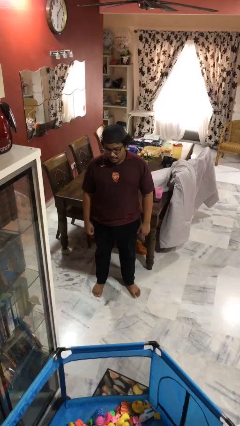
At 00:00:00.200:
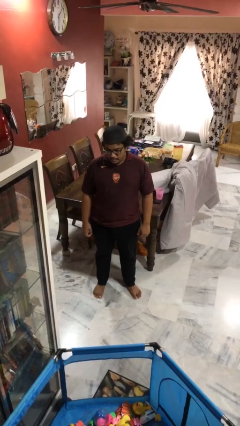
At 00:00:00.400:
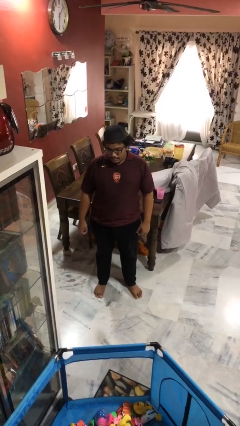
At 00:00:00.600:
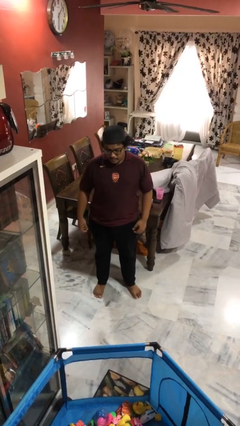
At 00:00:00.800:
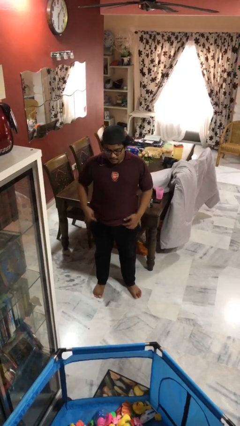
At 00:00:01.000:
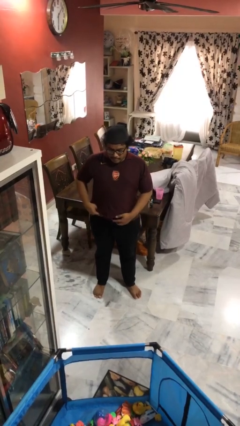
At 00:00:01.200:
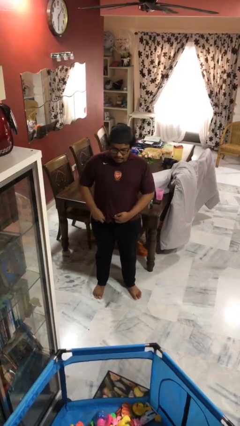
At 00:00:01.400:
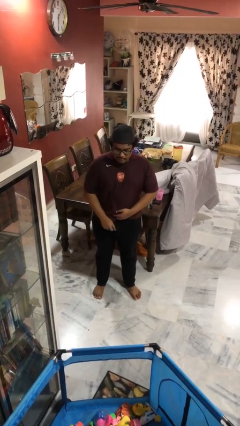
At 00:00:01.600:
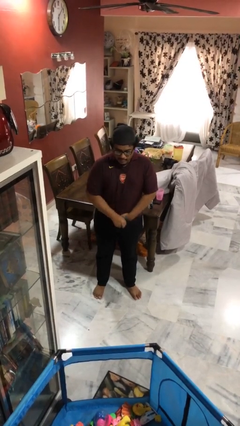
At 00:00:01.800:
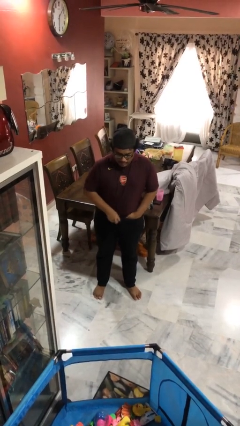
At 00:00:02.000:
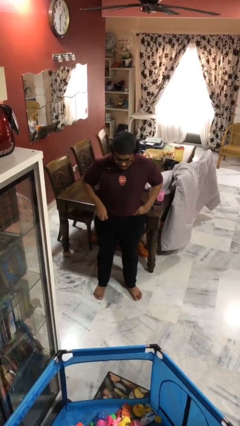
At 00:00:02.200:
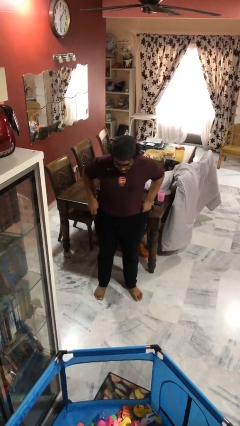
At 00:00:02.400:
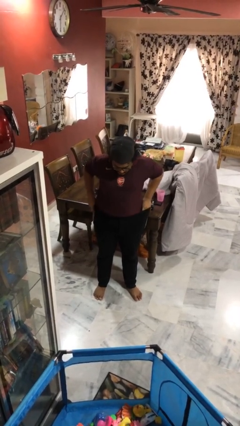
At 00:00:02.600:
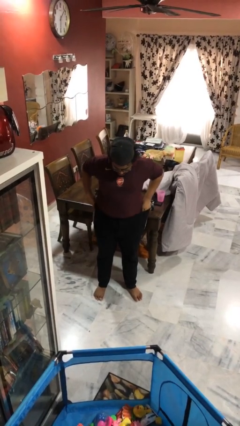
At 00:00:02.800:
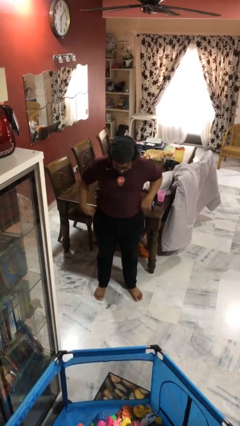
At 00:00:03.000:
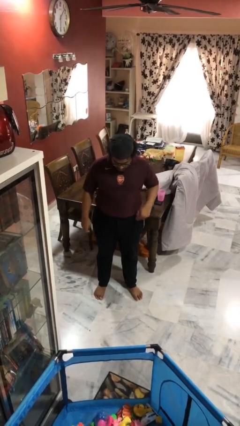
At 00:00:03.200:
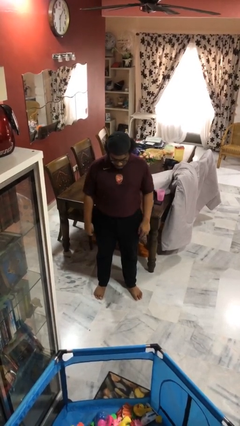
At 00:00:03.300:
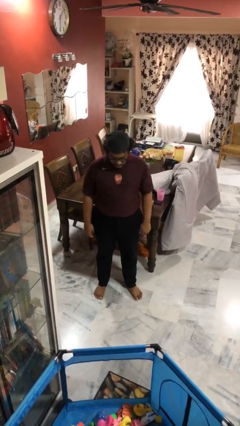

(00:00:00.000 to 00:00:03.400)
person tucks in shirt

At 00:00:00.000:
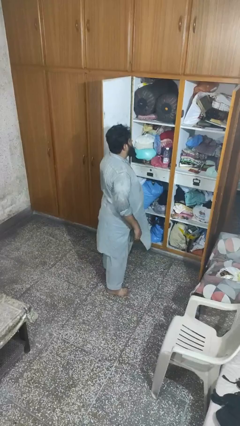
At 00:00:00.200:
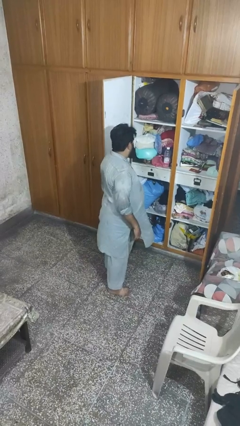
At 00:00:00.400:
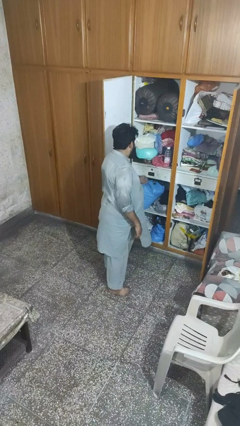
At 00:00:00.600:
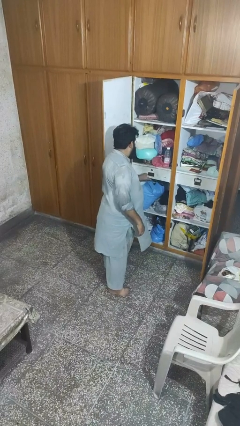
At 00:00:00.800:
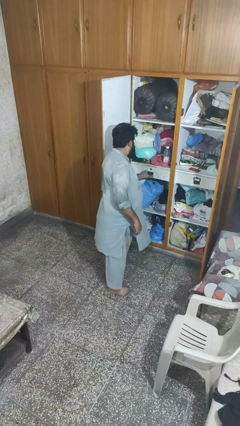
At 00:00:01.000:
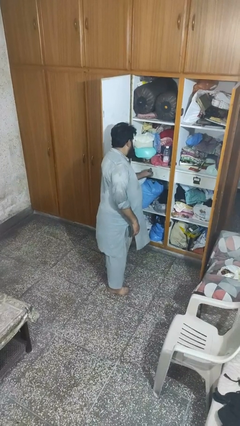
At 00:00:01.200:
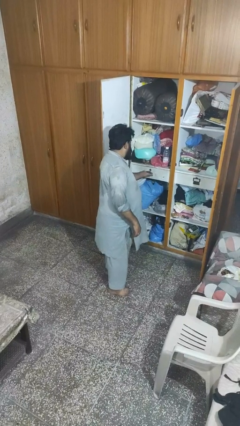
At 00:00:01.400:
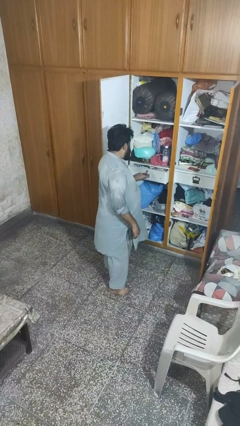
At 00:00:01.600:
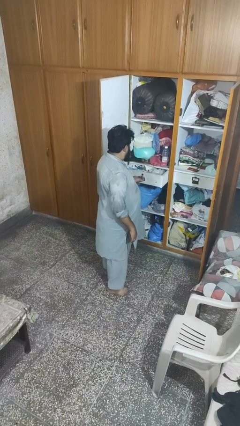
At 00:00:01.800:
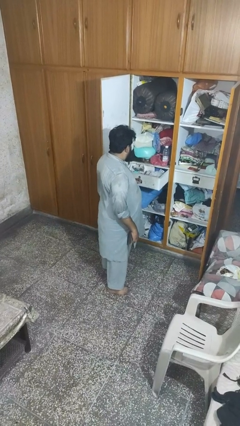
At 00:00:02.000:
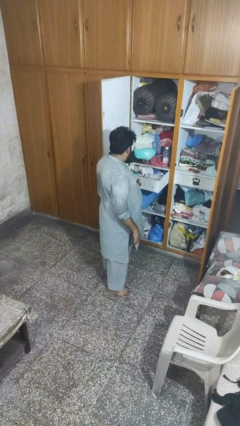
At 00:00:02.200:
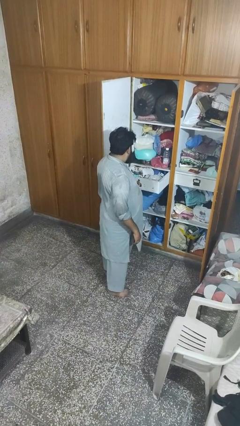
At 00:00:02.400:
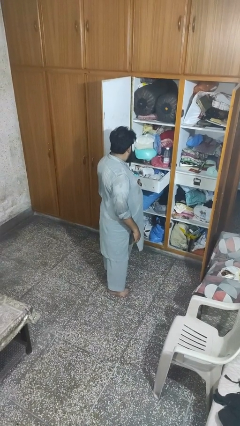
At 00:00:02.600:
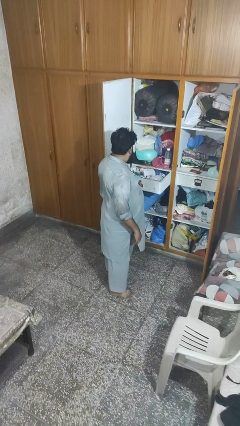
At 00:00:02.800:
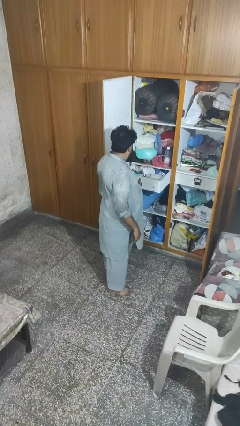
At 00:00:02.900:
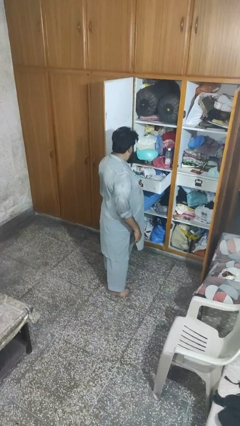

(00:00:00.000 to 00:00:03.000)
person opens dresser drawer

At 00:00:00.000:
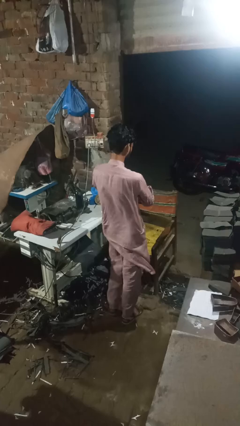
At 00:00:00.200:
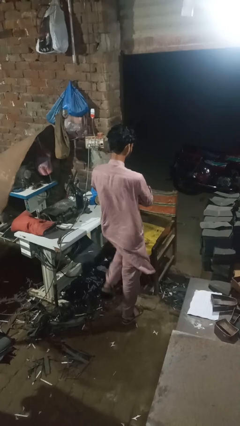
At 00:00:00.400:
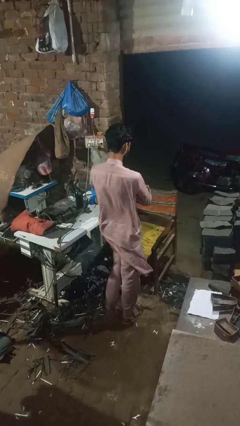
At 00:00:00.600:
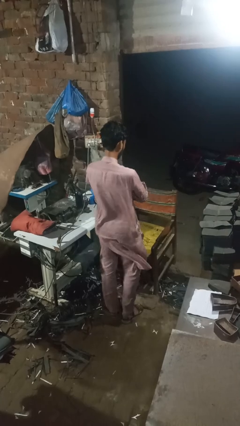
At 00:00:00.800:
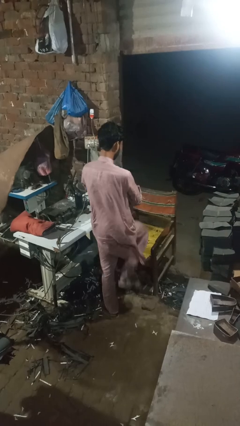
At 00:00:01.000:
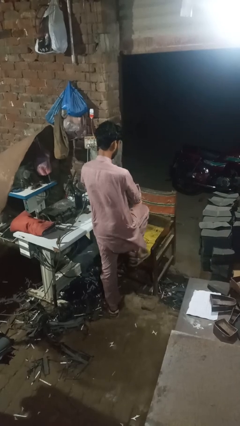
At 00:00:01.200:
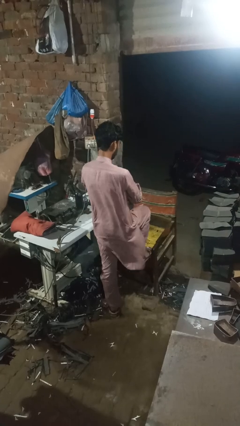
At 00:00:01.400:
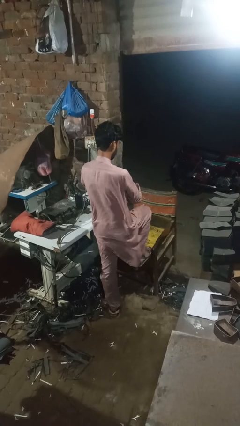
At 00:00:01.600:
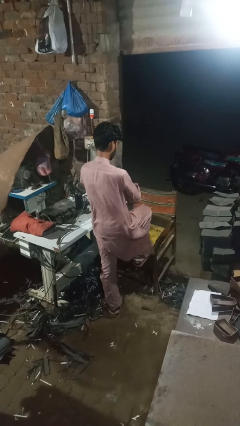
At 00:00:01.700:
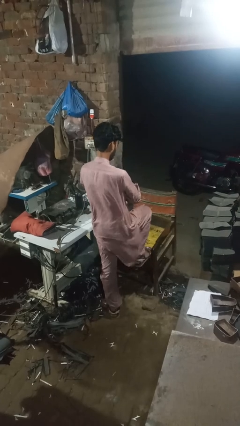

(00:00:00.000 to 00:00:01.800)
person stubs toe

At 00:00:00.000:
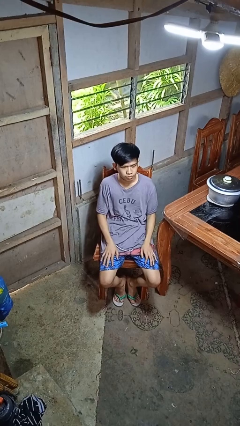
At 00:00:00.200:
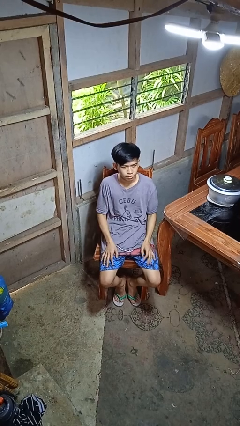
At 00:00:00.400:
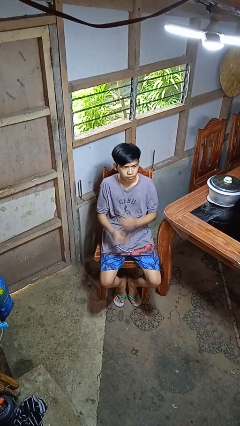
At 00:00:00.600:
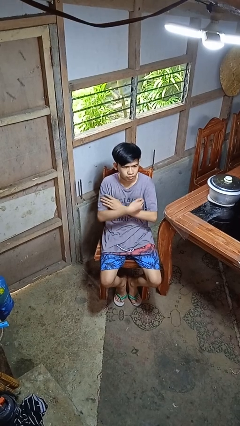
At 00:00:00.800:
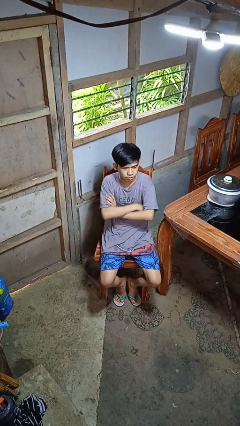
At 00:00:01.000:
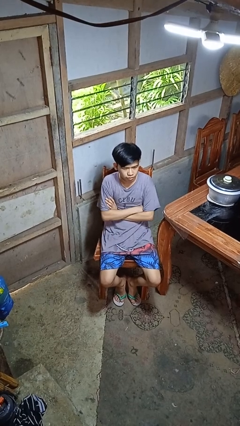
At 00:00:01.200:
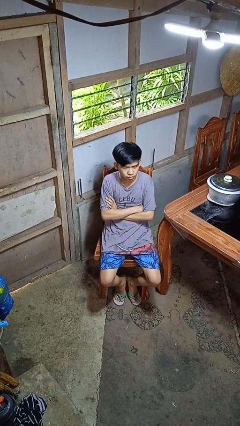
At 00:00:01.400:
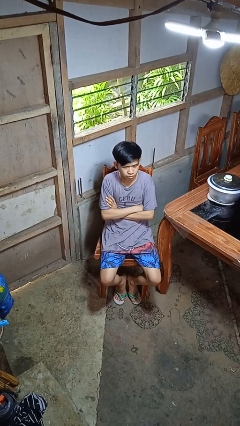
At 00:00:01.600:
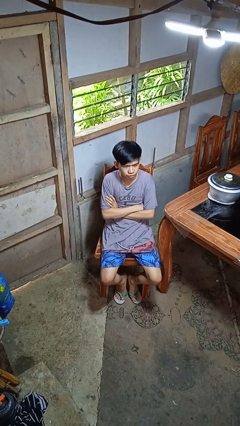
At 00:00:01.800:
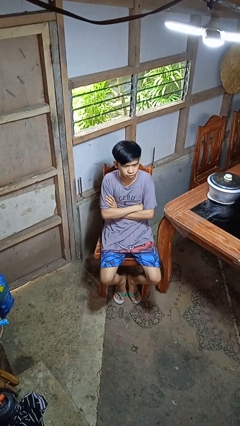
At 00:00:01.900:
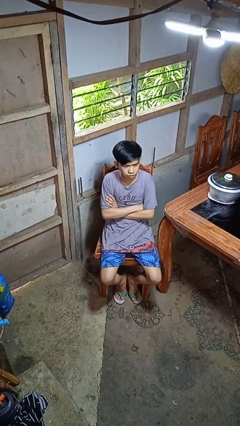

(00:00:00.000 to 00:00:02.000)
person crosses arms

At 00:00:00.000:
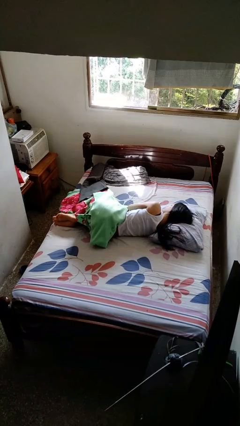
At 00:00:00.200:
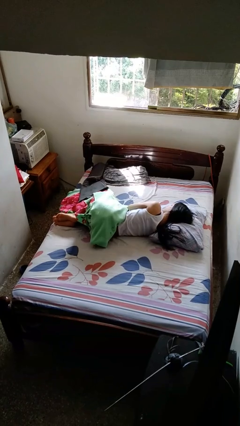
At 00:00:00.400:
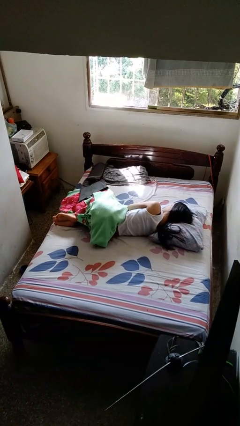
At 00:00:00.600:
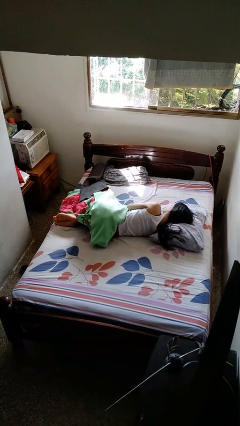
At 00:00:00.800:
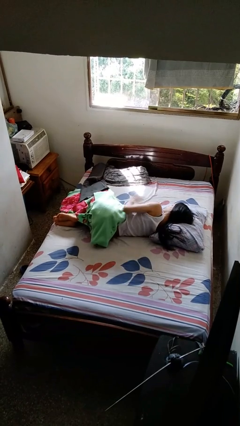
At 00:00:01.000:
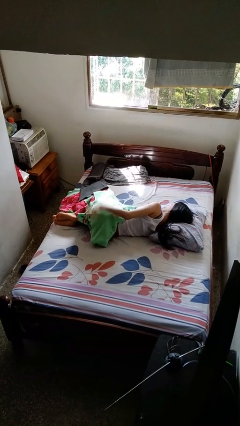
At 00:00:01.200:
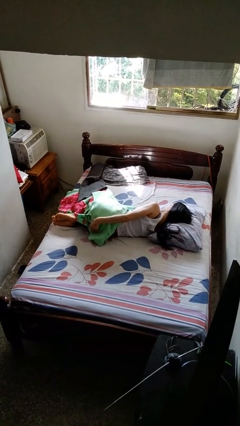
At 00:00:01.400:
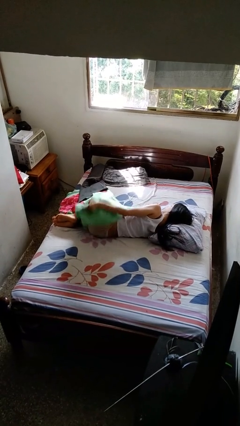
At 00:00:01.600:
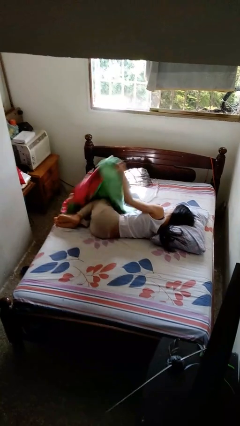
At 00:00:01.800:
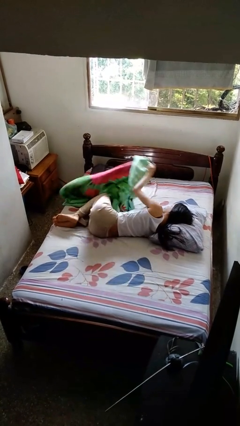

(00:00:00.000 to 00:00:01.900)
person uncovers with bedsheets

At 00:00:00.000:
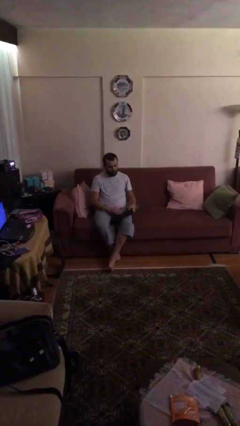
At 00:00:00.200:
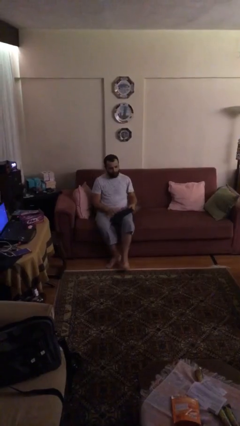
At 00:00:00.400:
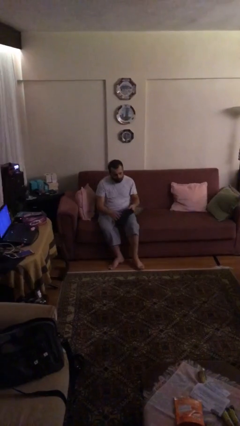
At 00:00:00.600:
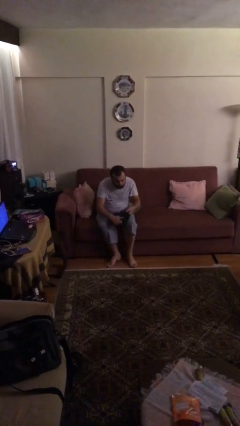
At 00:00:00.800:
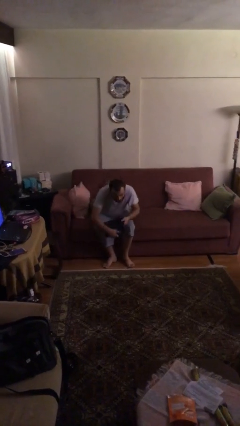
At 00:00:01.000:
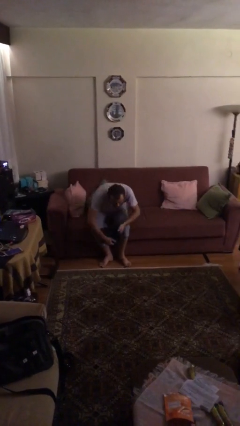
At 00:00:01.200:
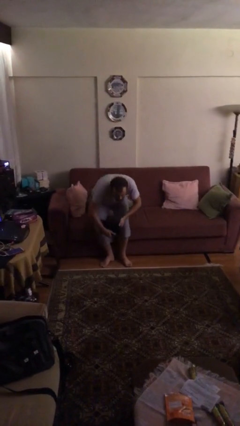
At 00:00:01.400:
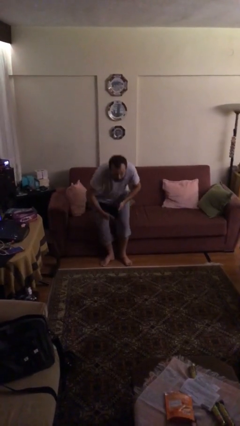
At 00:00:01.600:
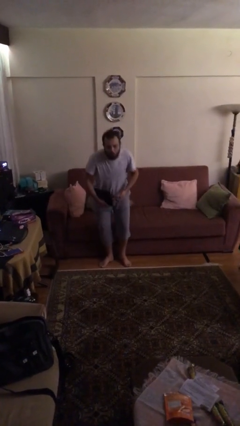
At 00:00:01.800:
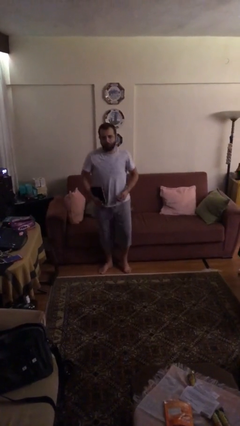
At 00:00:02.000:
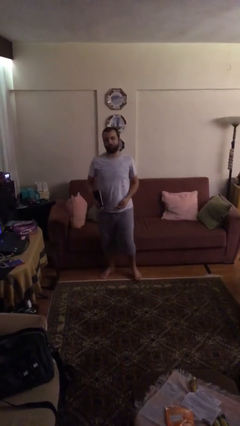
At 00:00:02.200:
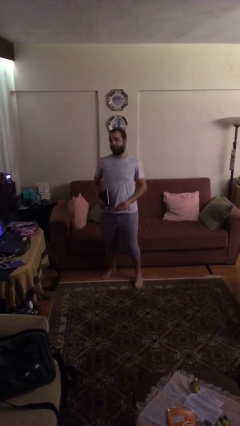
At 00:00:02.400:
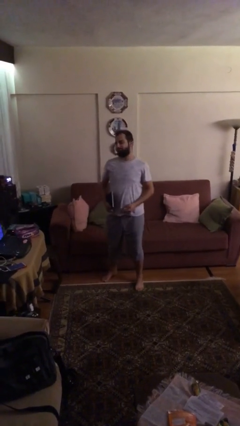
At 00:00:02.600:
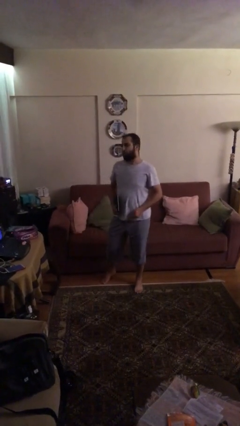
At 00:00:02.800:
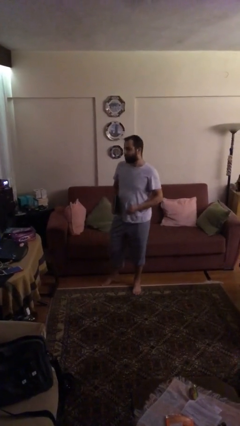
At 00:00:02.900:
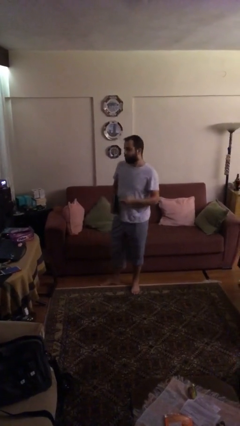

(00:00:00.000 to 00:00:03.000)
person stands up

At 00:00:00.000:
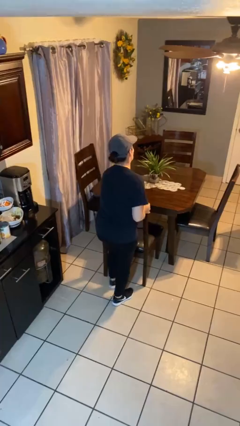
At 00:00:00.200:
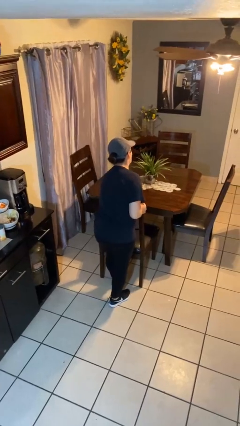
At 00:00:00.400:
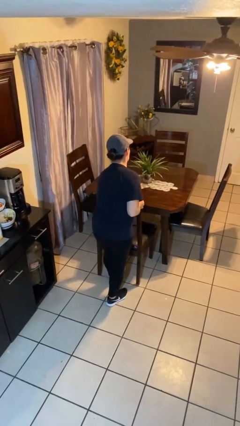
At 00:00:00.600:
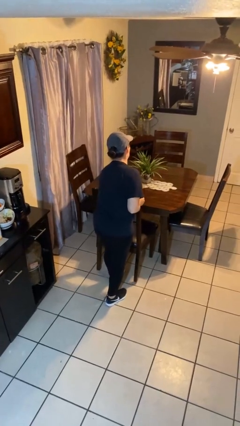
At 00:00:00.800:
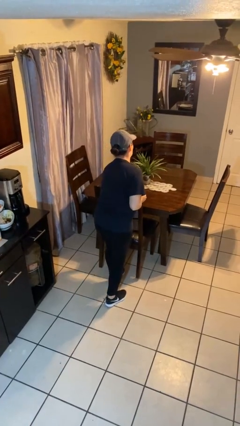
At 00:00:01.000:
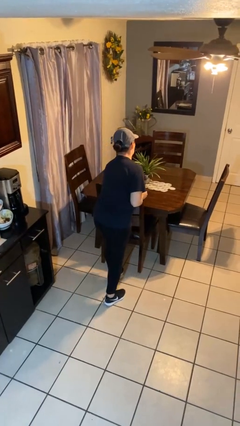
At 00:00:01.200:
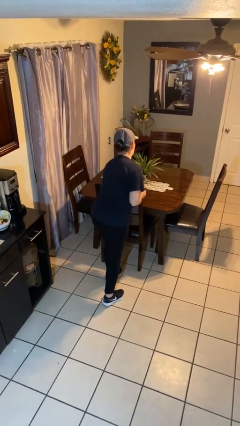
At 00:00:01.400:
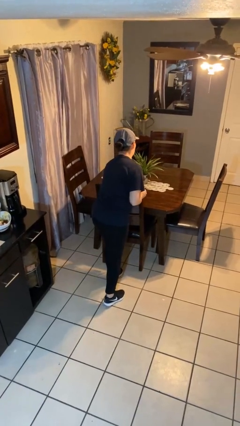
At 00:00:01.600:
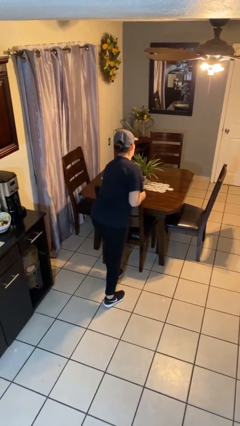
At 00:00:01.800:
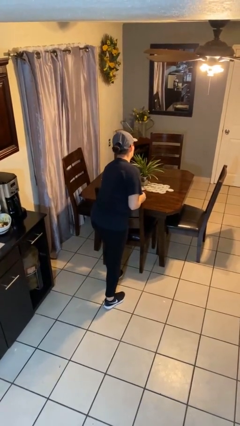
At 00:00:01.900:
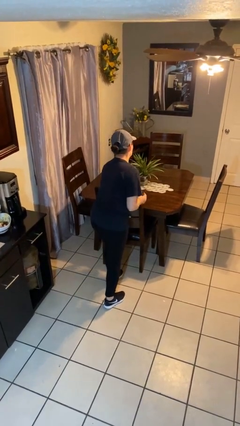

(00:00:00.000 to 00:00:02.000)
person pushes in chair
